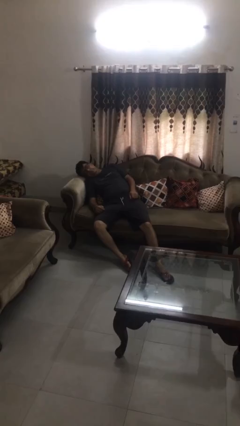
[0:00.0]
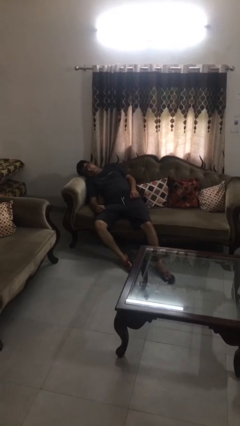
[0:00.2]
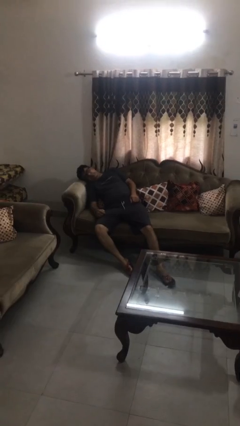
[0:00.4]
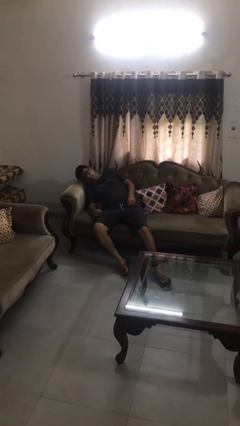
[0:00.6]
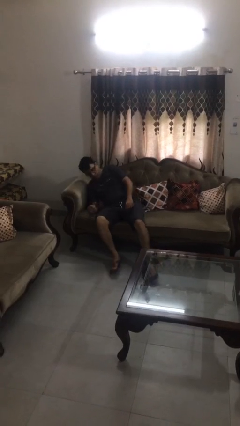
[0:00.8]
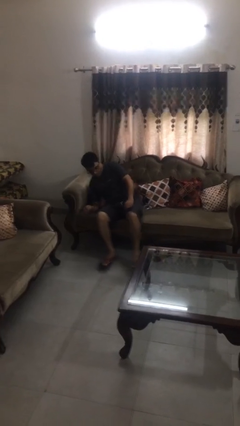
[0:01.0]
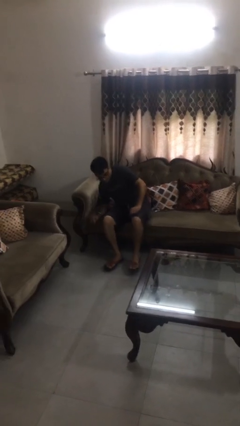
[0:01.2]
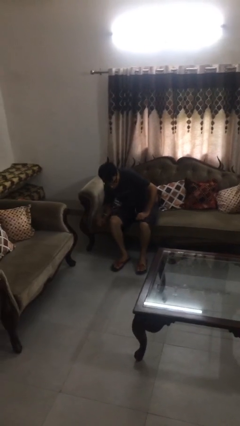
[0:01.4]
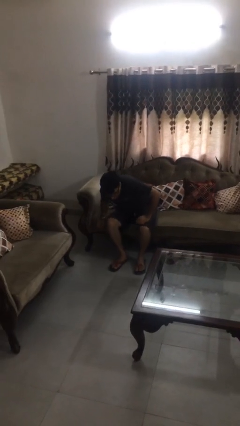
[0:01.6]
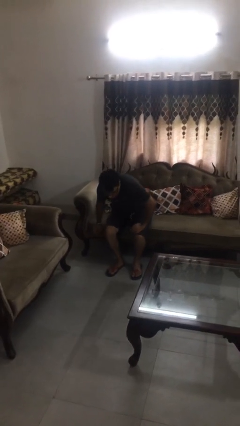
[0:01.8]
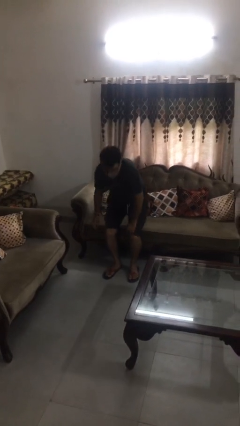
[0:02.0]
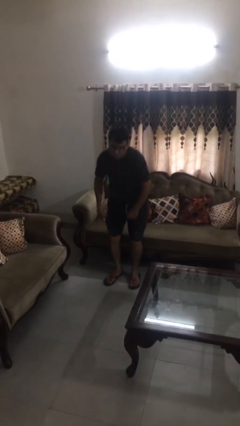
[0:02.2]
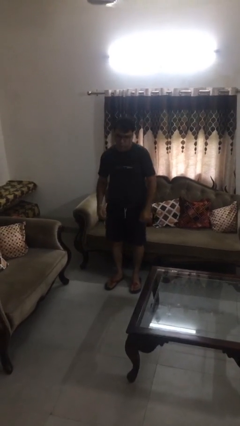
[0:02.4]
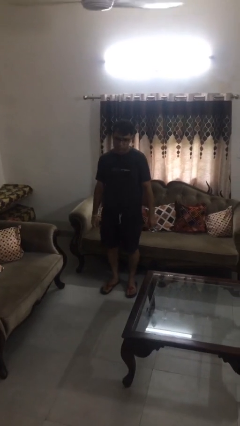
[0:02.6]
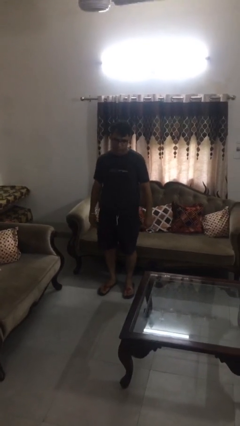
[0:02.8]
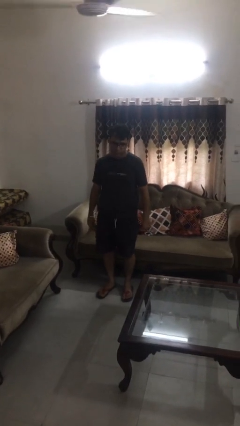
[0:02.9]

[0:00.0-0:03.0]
person stands up

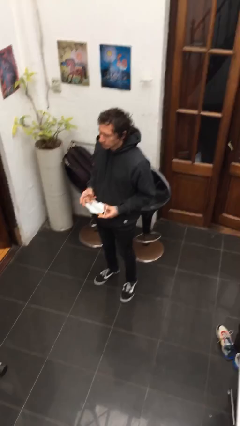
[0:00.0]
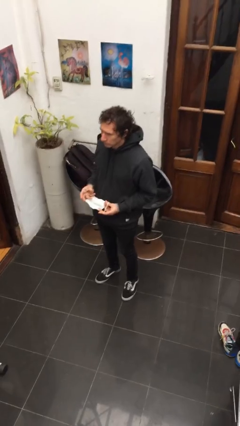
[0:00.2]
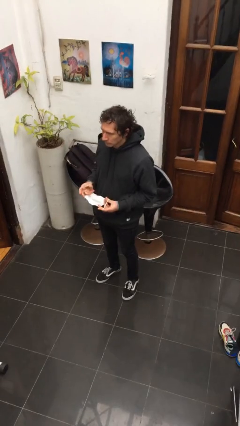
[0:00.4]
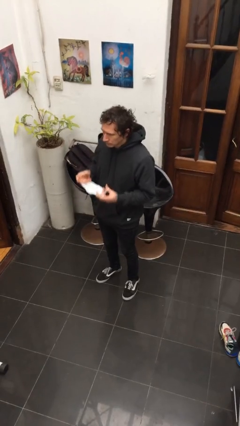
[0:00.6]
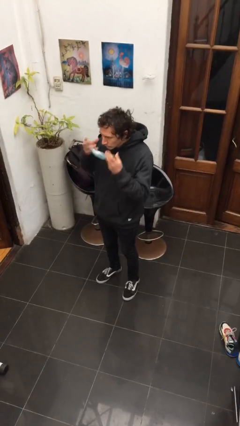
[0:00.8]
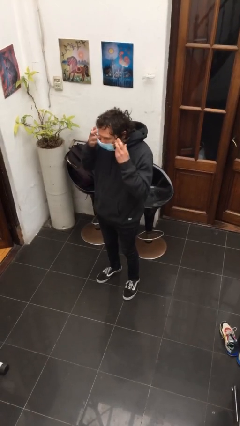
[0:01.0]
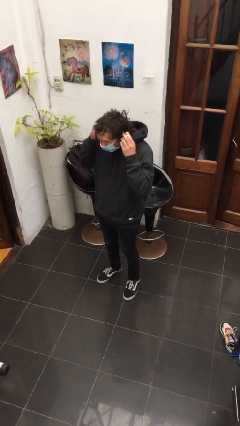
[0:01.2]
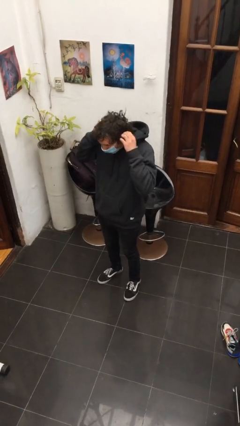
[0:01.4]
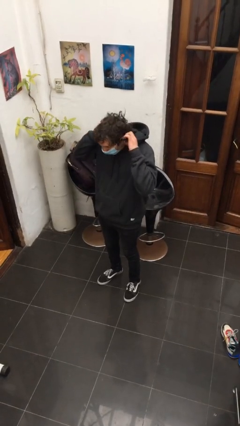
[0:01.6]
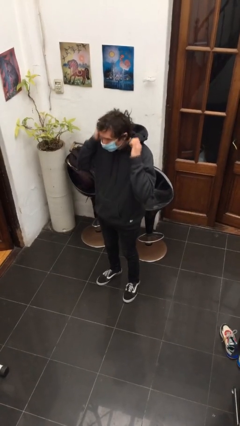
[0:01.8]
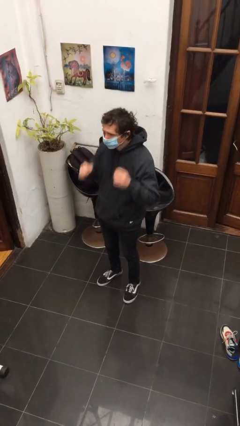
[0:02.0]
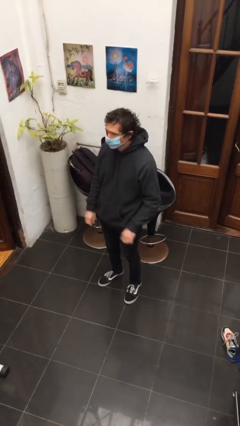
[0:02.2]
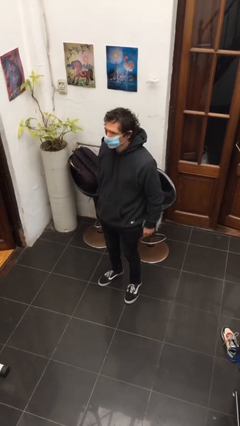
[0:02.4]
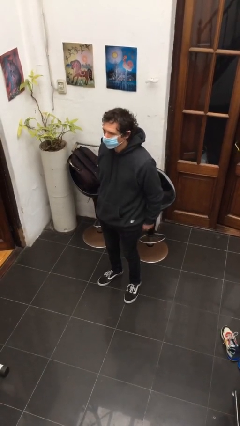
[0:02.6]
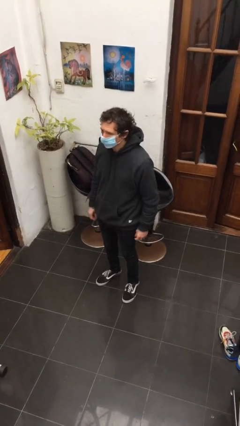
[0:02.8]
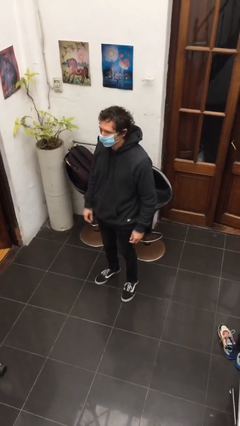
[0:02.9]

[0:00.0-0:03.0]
person puts on facemask

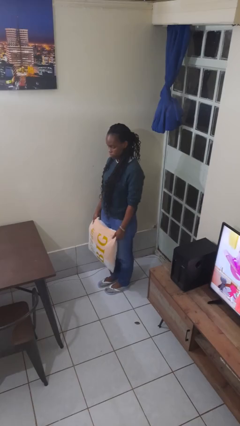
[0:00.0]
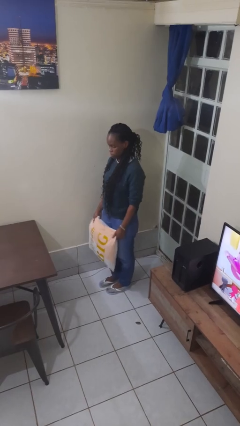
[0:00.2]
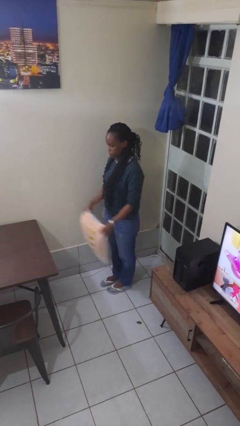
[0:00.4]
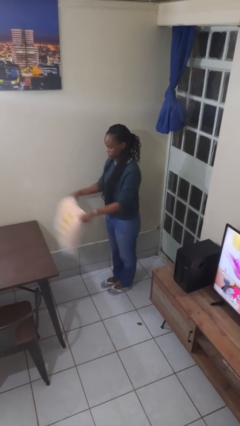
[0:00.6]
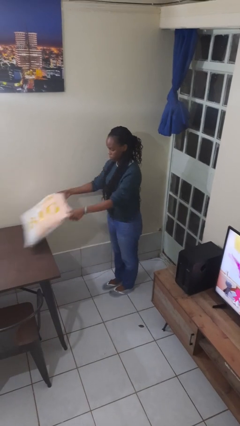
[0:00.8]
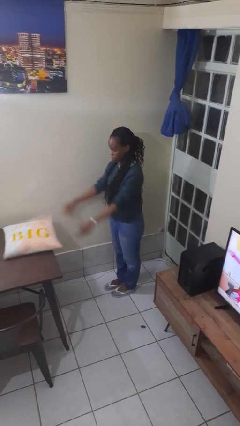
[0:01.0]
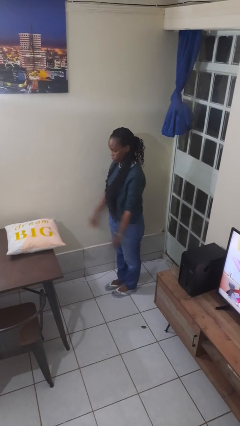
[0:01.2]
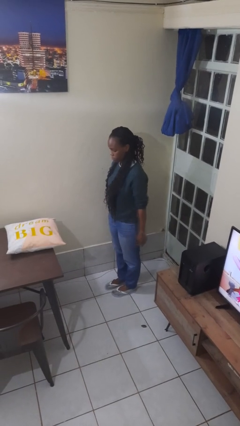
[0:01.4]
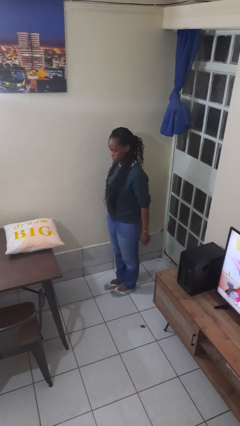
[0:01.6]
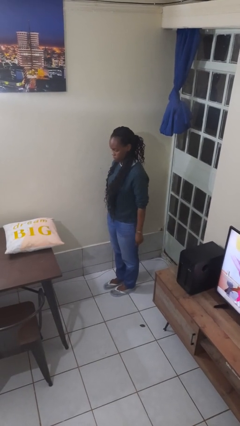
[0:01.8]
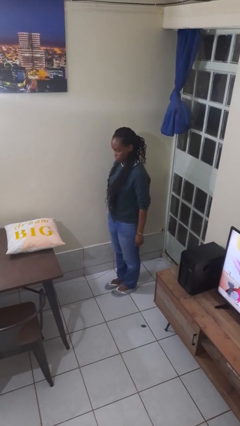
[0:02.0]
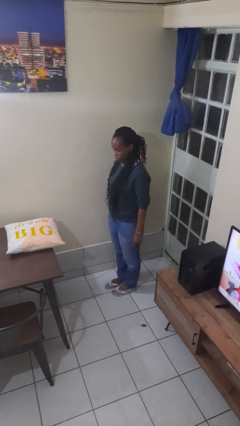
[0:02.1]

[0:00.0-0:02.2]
person throws object on table

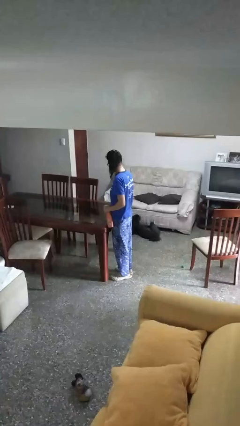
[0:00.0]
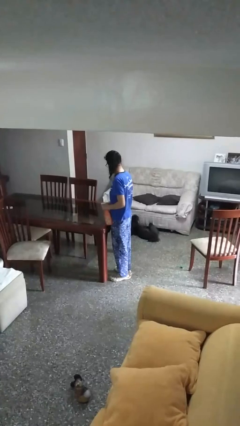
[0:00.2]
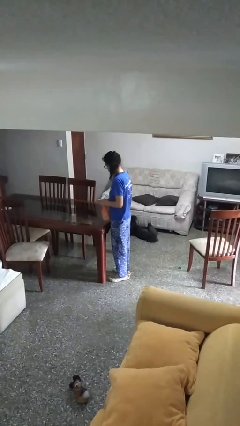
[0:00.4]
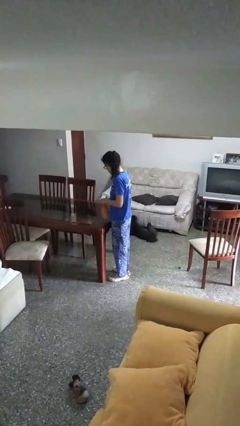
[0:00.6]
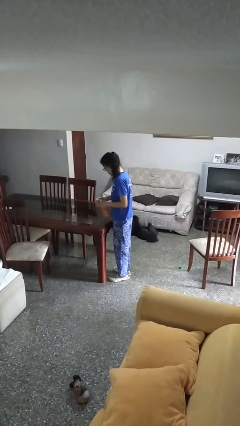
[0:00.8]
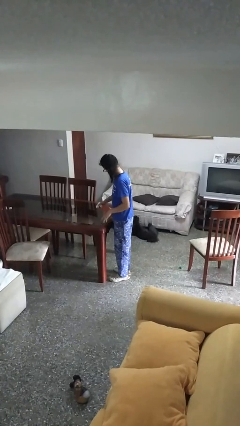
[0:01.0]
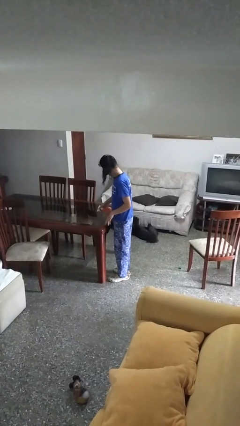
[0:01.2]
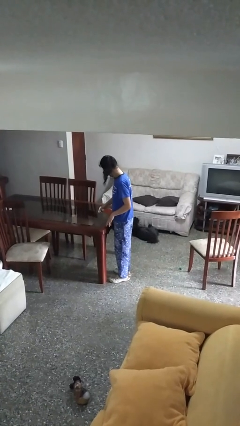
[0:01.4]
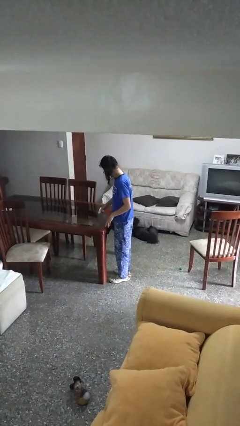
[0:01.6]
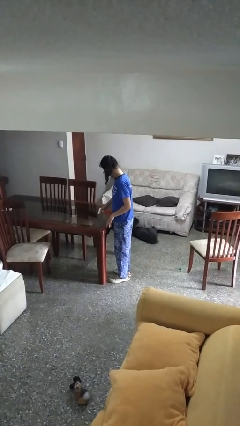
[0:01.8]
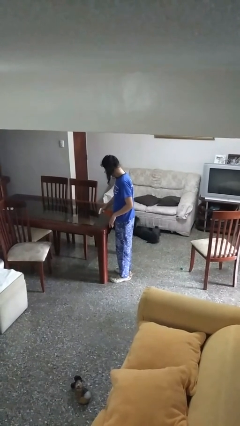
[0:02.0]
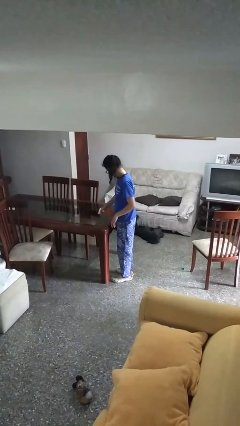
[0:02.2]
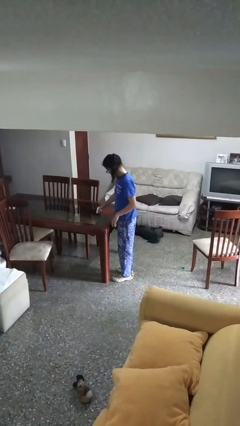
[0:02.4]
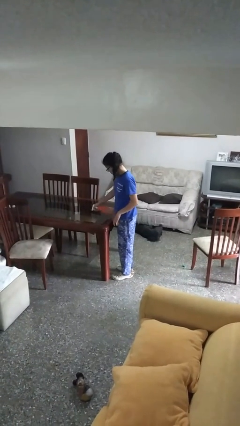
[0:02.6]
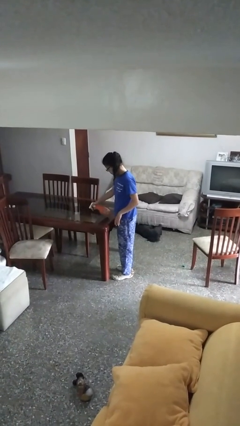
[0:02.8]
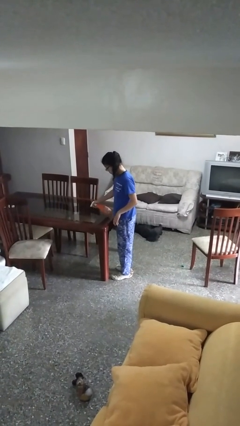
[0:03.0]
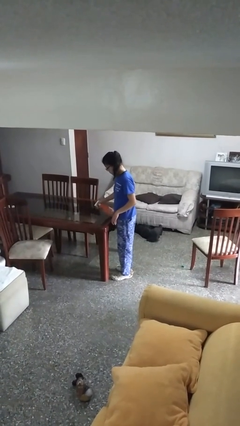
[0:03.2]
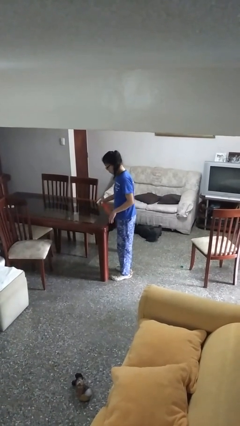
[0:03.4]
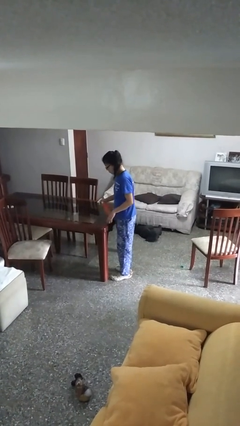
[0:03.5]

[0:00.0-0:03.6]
person sprays from bottle

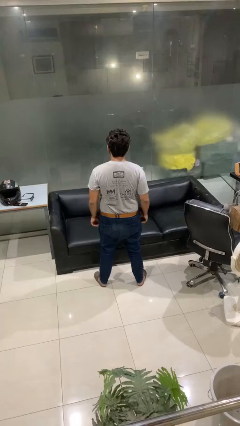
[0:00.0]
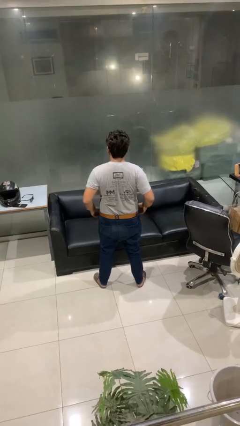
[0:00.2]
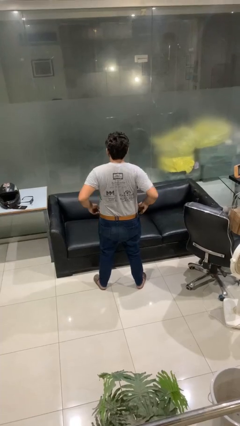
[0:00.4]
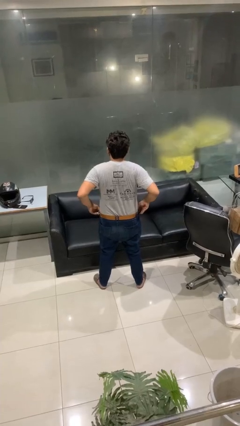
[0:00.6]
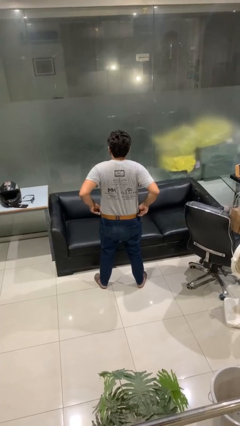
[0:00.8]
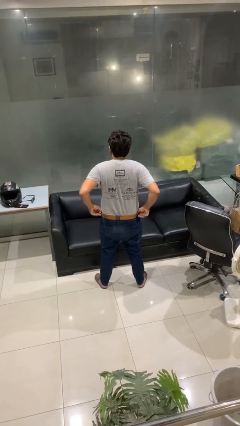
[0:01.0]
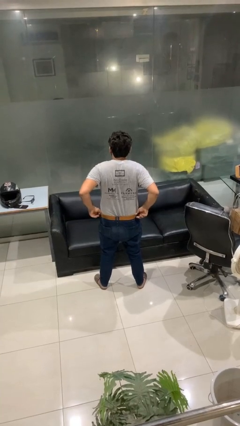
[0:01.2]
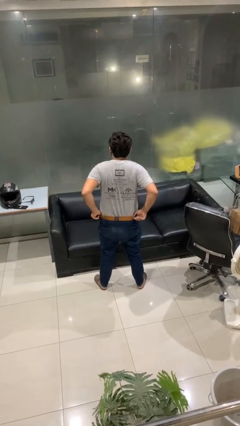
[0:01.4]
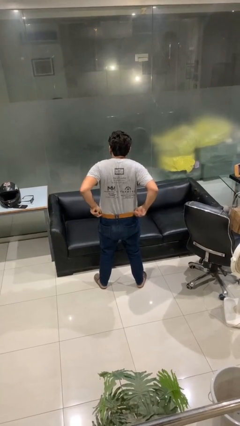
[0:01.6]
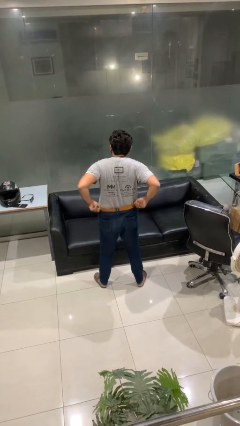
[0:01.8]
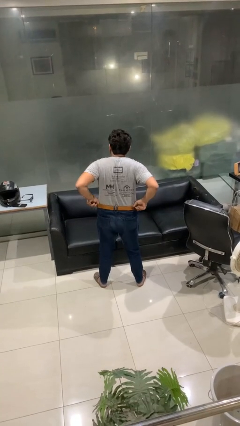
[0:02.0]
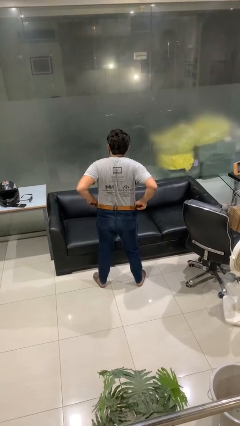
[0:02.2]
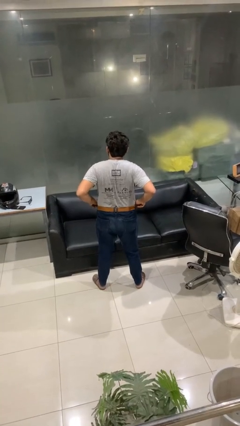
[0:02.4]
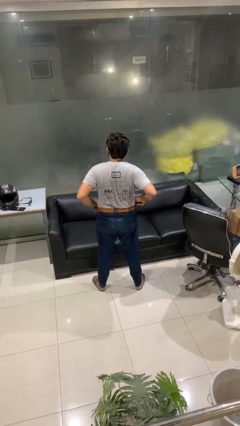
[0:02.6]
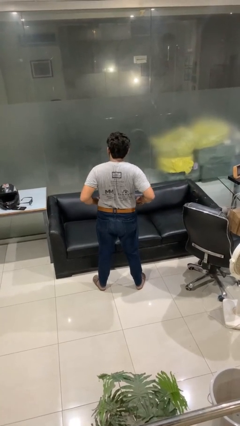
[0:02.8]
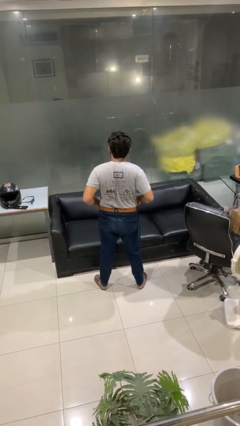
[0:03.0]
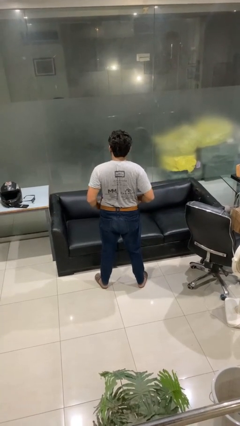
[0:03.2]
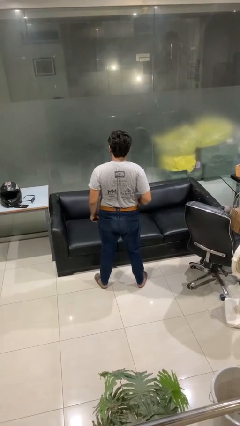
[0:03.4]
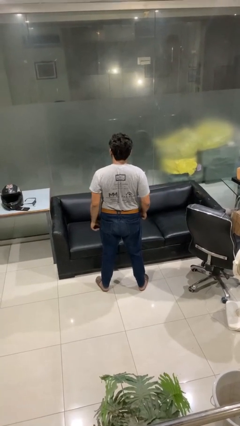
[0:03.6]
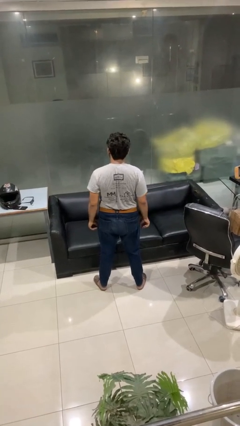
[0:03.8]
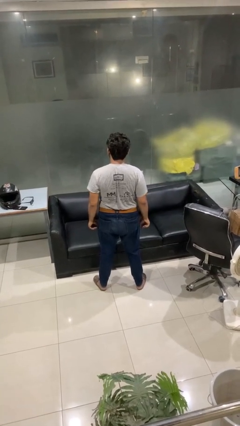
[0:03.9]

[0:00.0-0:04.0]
person hikes up pants

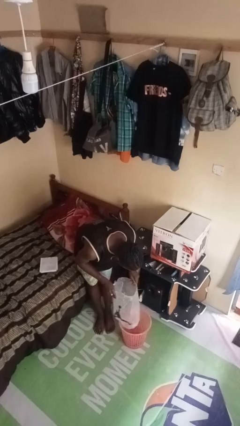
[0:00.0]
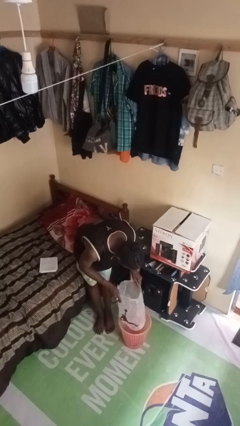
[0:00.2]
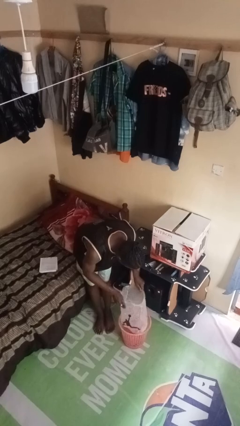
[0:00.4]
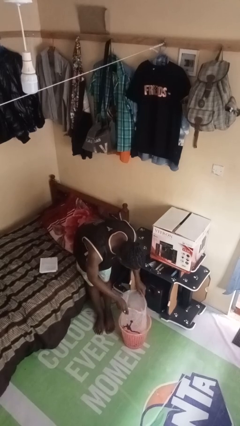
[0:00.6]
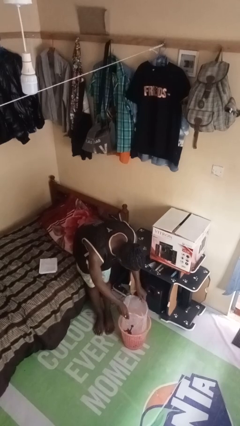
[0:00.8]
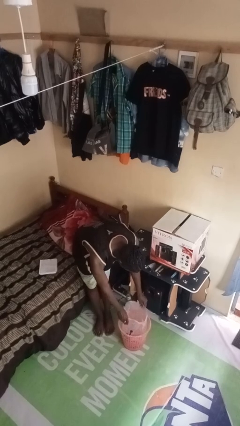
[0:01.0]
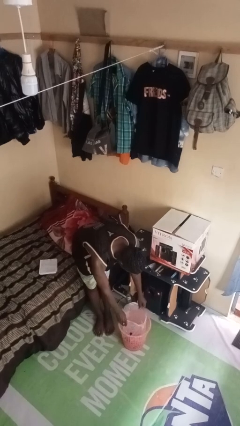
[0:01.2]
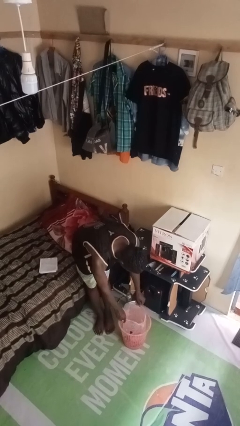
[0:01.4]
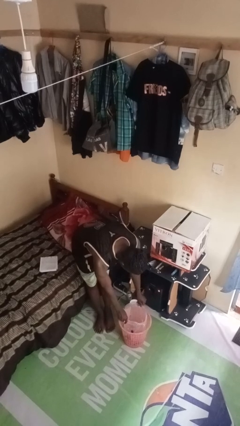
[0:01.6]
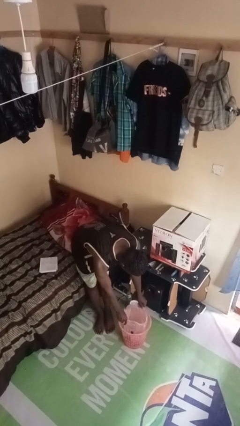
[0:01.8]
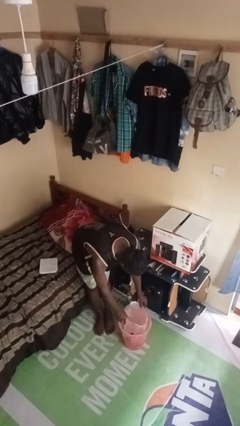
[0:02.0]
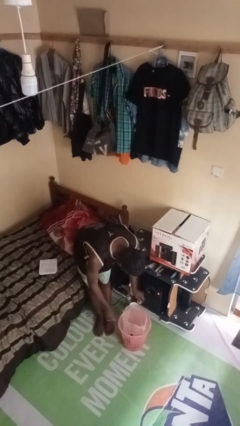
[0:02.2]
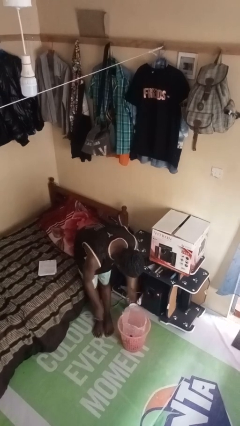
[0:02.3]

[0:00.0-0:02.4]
person inserts trashbag into trashcan
